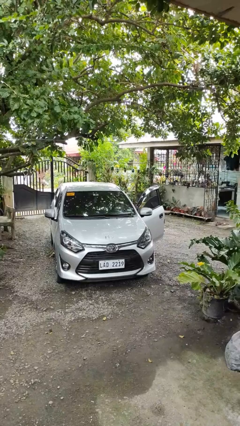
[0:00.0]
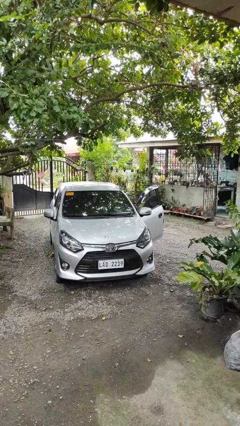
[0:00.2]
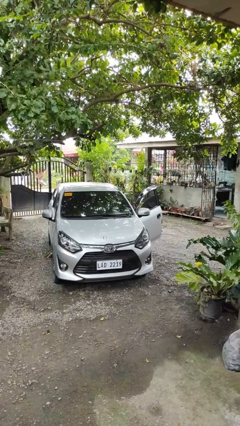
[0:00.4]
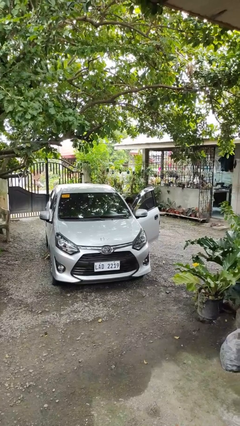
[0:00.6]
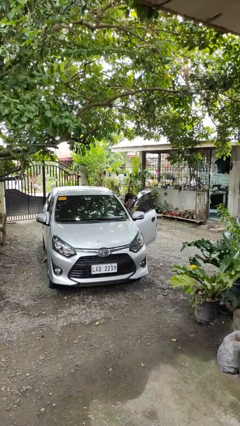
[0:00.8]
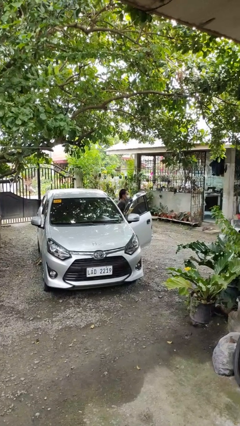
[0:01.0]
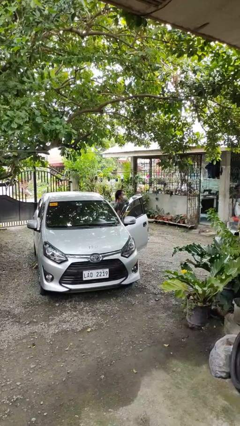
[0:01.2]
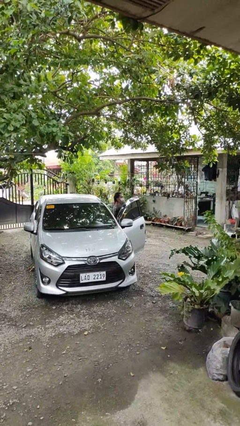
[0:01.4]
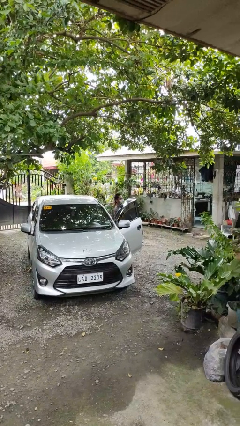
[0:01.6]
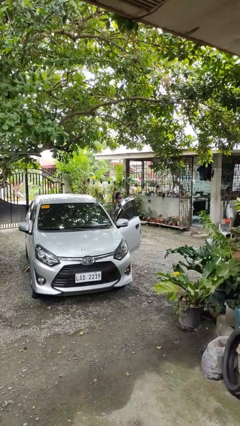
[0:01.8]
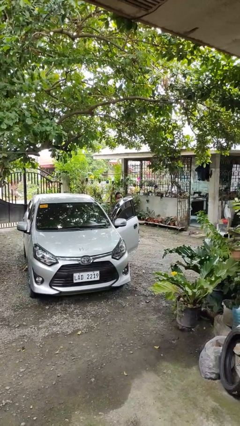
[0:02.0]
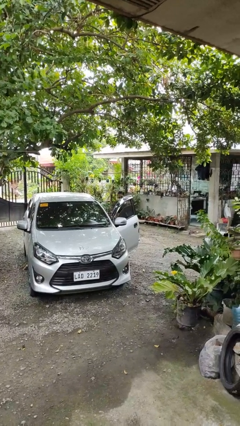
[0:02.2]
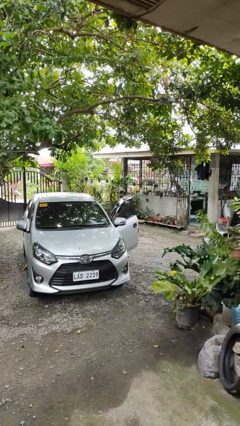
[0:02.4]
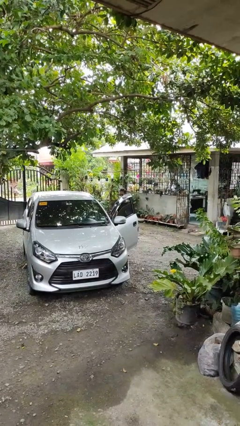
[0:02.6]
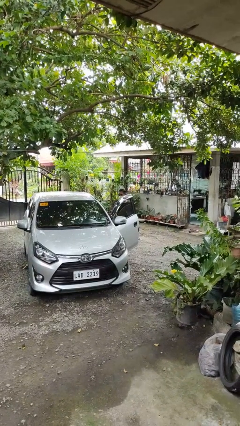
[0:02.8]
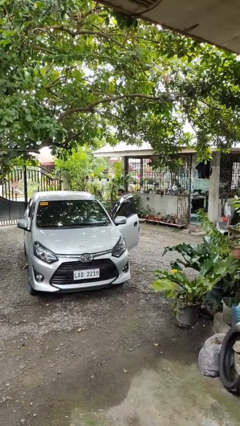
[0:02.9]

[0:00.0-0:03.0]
person exits car

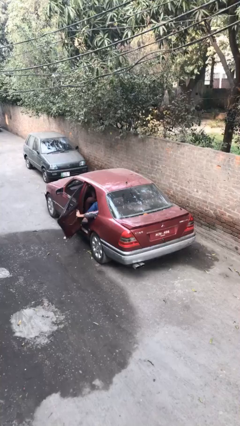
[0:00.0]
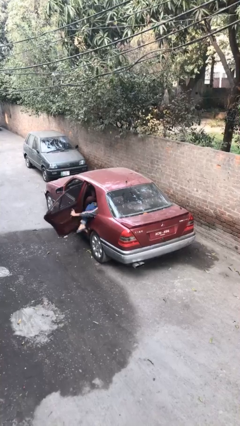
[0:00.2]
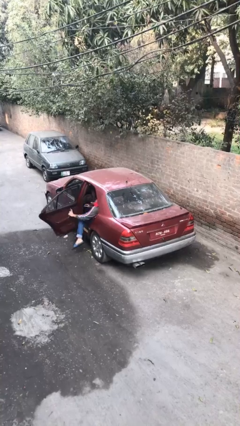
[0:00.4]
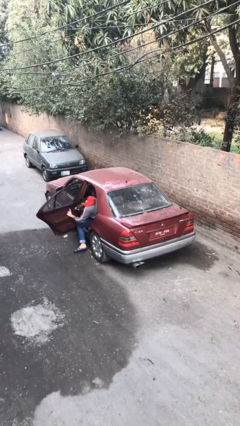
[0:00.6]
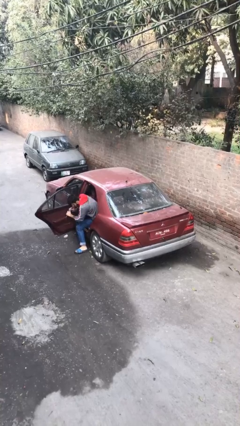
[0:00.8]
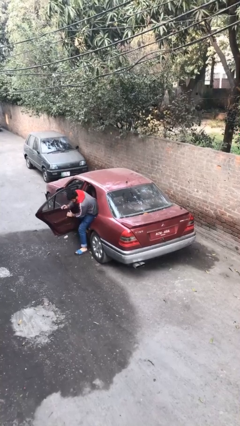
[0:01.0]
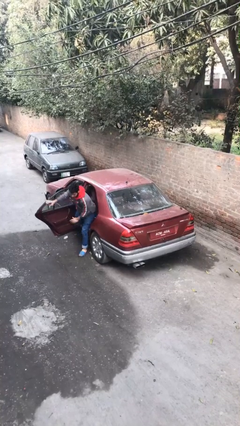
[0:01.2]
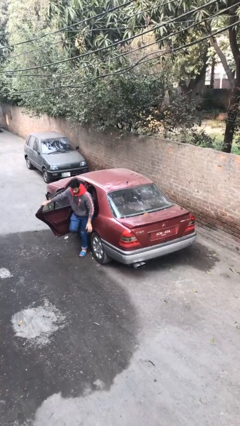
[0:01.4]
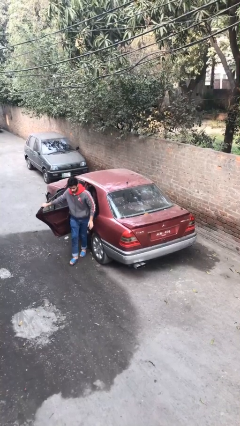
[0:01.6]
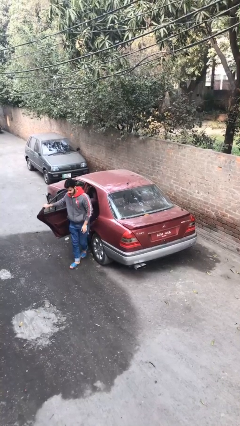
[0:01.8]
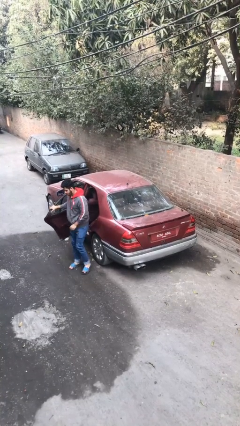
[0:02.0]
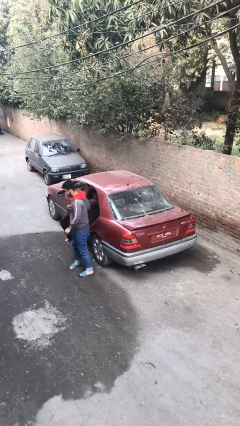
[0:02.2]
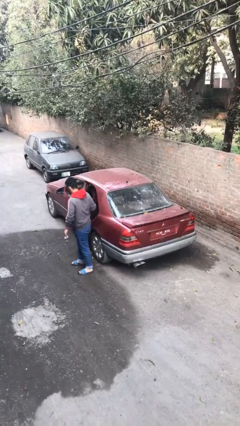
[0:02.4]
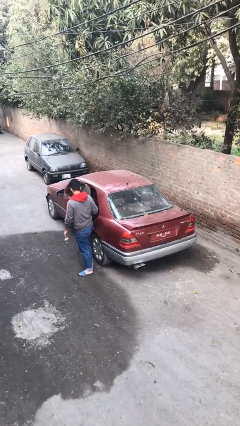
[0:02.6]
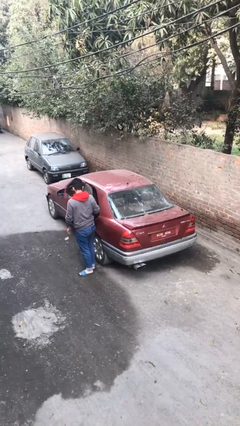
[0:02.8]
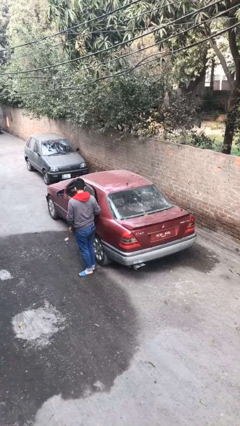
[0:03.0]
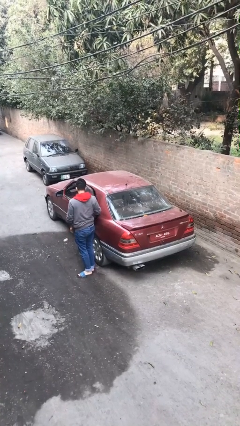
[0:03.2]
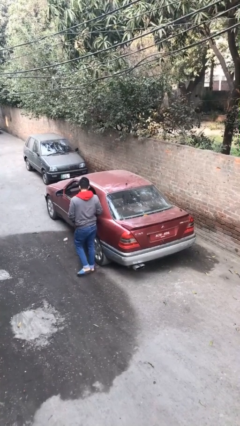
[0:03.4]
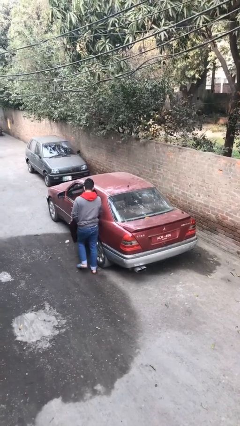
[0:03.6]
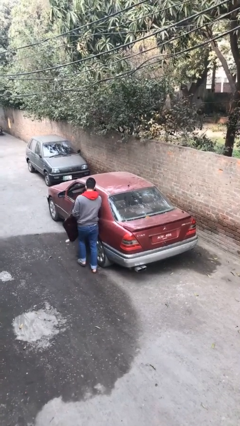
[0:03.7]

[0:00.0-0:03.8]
car drops off person

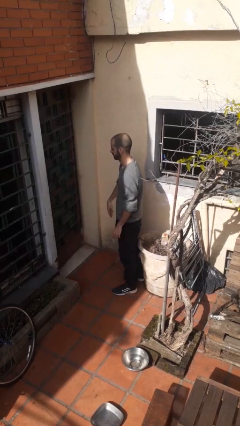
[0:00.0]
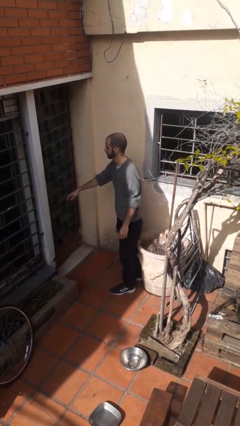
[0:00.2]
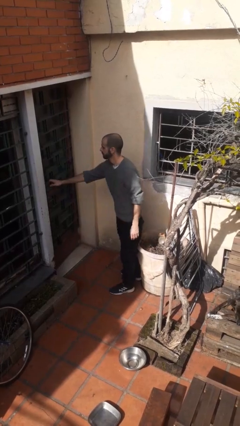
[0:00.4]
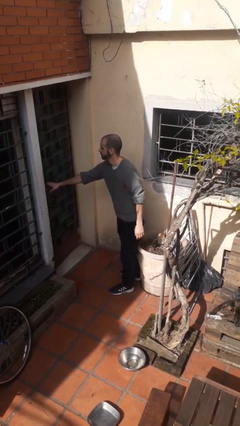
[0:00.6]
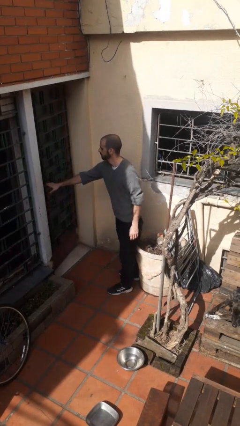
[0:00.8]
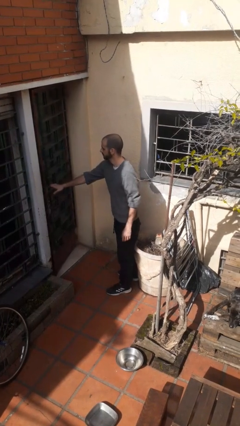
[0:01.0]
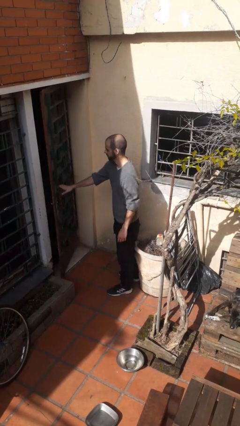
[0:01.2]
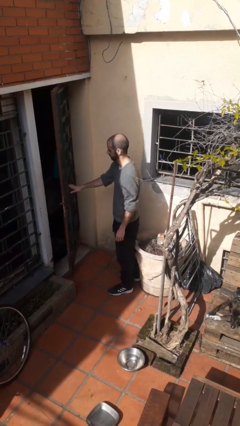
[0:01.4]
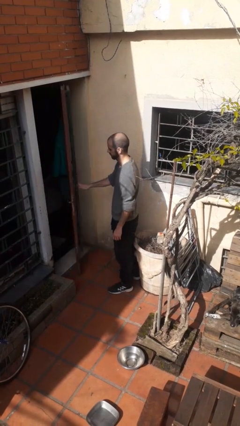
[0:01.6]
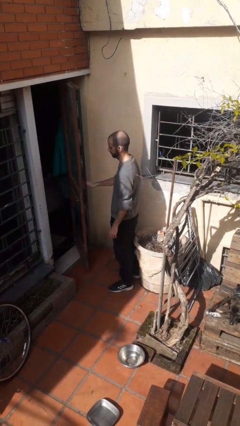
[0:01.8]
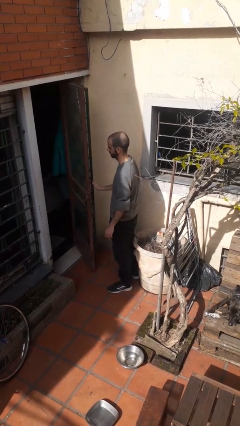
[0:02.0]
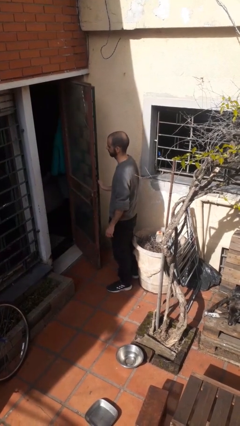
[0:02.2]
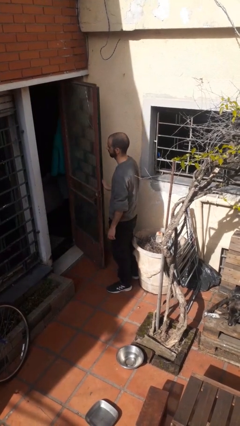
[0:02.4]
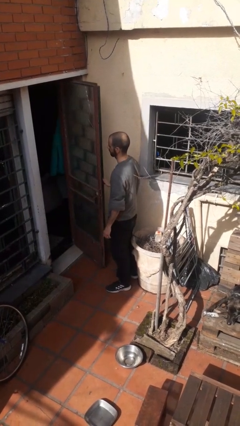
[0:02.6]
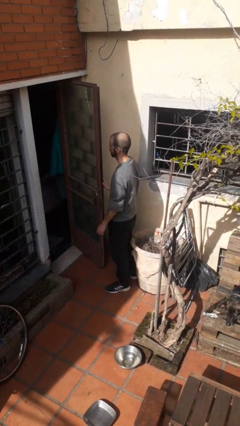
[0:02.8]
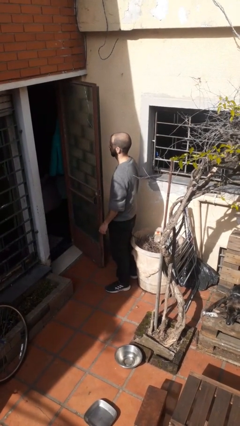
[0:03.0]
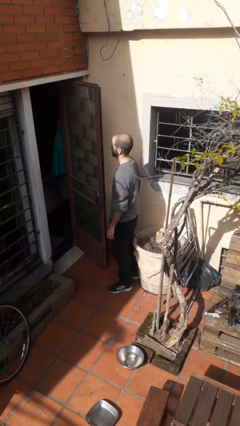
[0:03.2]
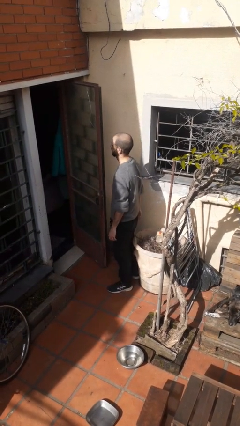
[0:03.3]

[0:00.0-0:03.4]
person opens facility door

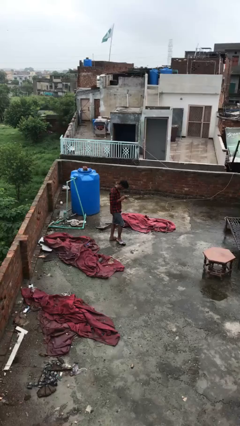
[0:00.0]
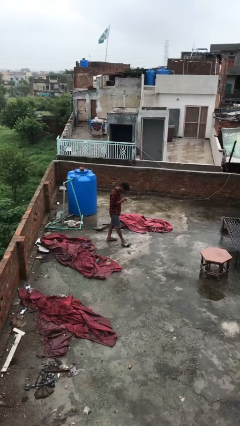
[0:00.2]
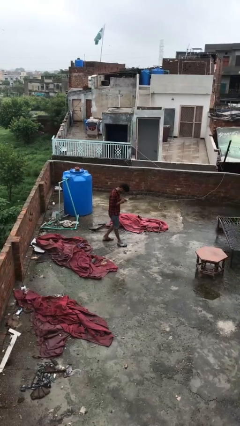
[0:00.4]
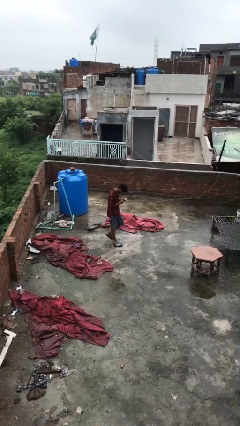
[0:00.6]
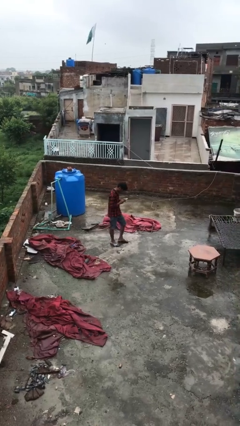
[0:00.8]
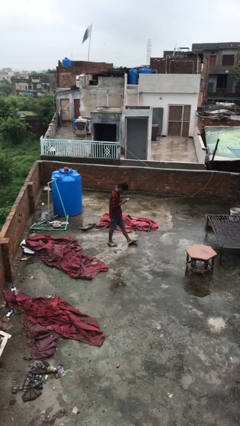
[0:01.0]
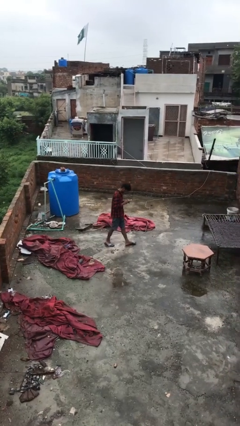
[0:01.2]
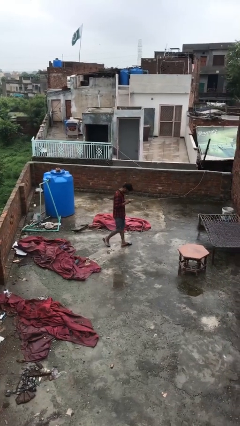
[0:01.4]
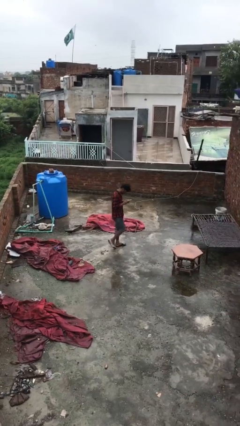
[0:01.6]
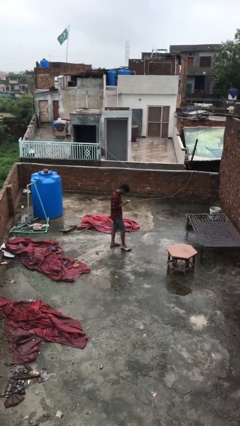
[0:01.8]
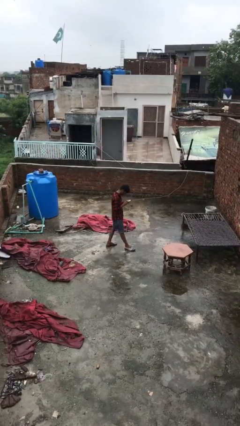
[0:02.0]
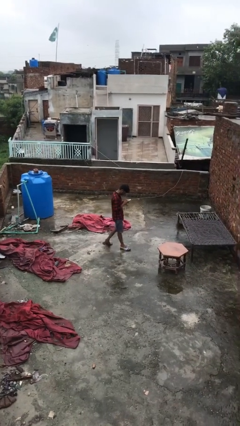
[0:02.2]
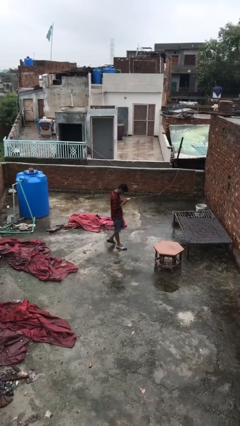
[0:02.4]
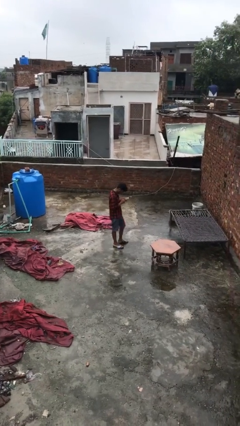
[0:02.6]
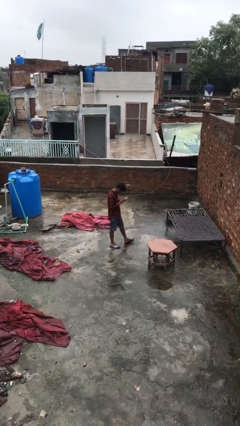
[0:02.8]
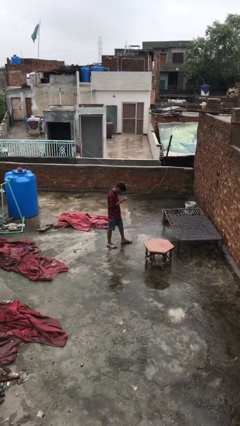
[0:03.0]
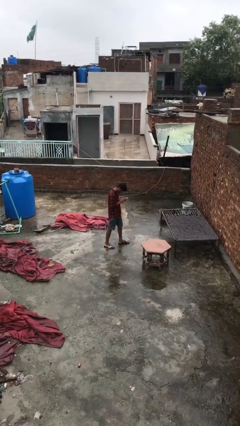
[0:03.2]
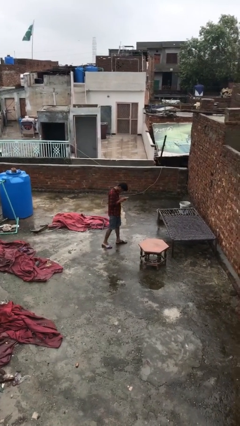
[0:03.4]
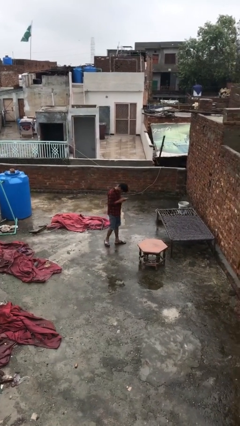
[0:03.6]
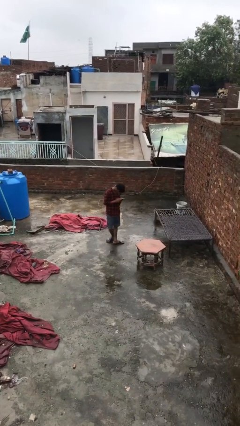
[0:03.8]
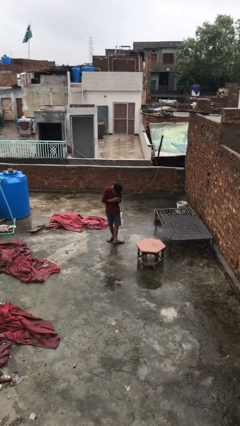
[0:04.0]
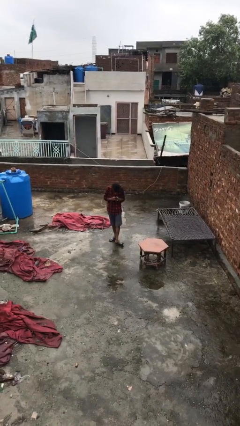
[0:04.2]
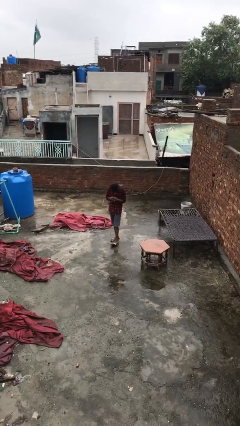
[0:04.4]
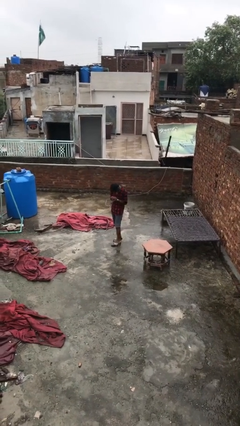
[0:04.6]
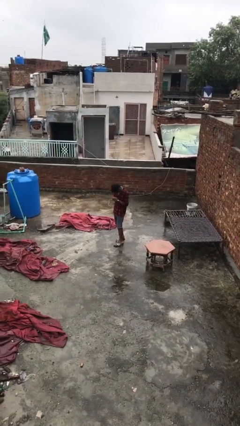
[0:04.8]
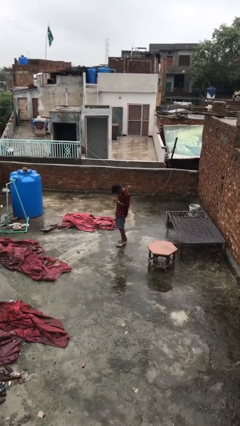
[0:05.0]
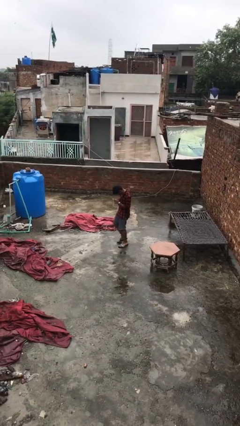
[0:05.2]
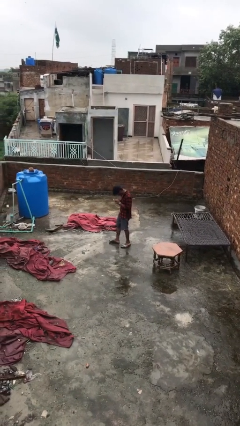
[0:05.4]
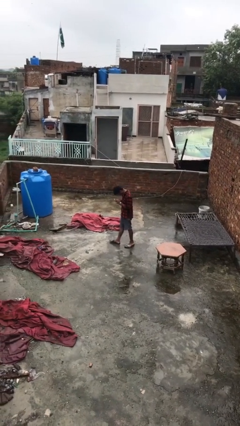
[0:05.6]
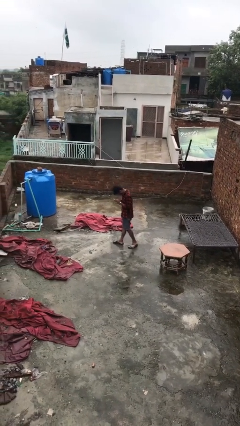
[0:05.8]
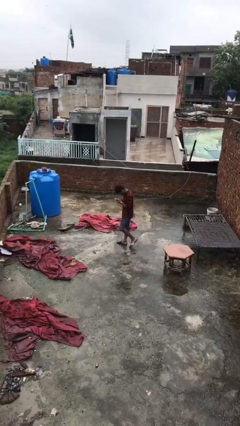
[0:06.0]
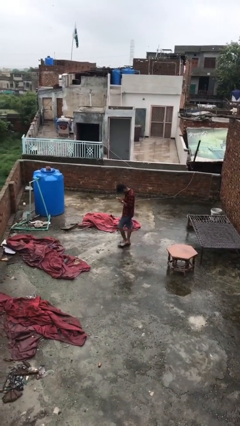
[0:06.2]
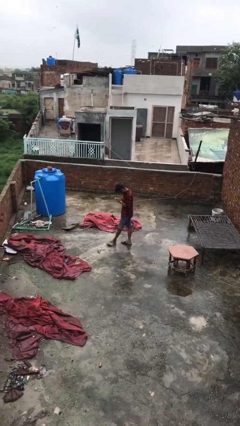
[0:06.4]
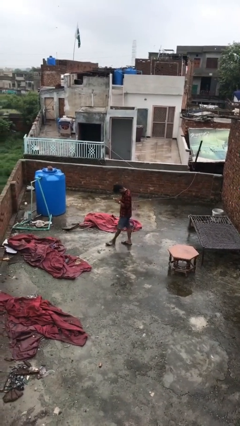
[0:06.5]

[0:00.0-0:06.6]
person texts on phone

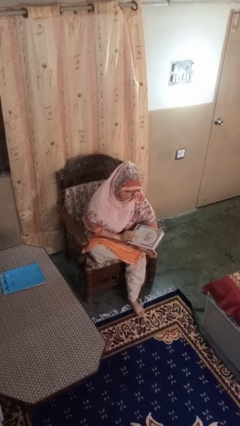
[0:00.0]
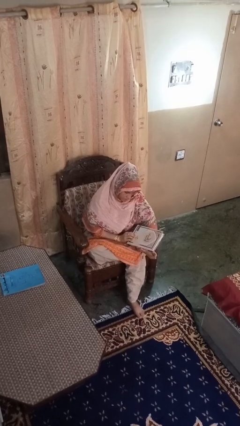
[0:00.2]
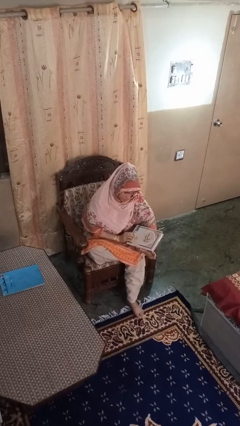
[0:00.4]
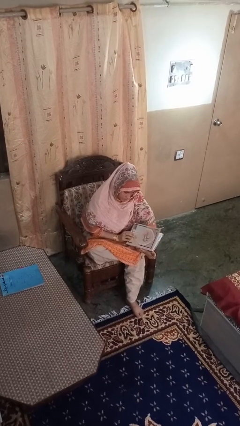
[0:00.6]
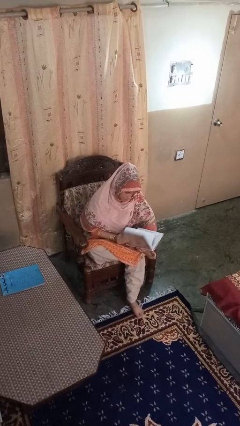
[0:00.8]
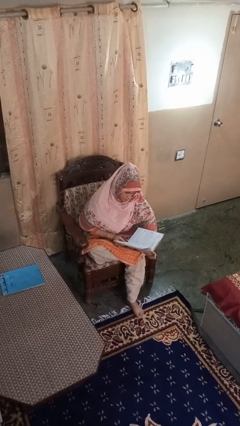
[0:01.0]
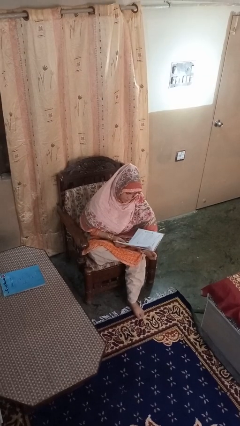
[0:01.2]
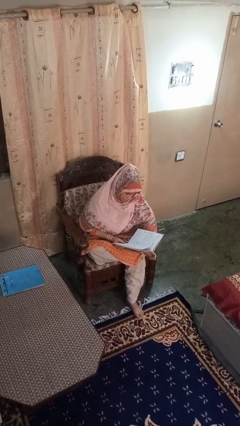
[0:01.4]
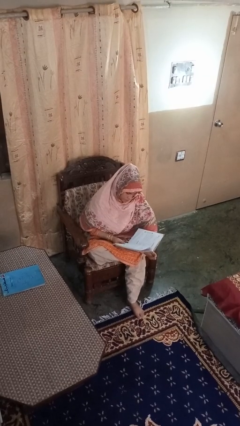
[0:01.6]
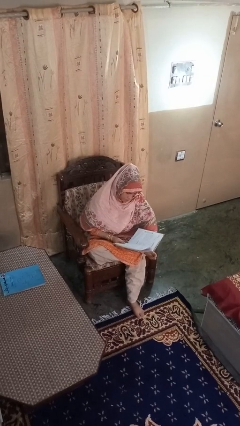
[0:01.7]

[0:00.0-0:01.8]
person reads book
